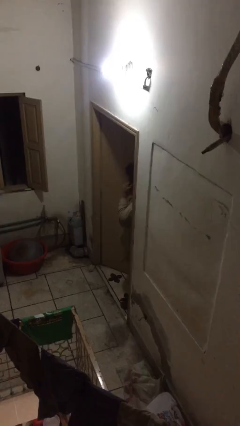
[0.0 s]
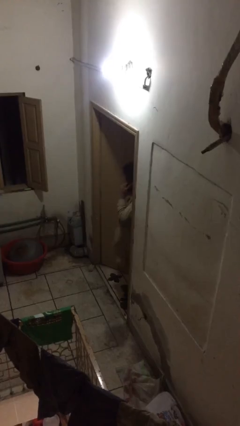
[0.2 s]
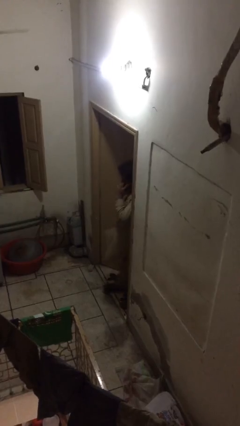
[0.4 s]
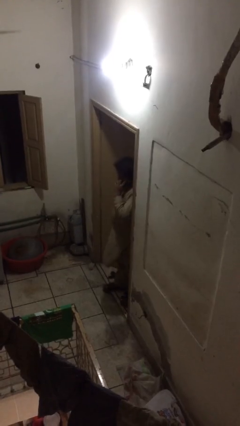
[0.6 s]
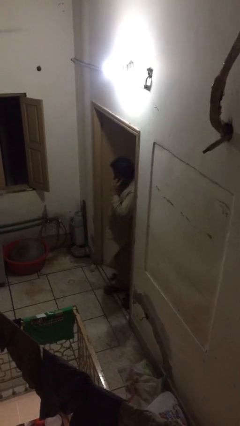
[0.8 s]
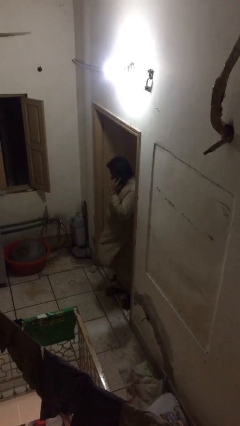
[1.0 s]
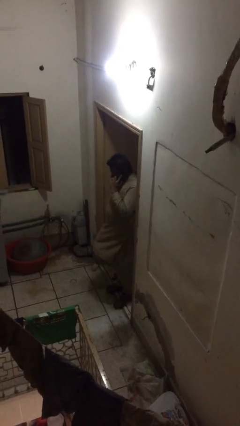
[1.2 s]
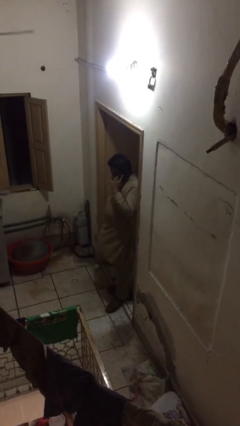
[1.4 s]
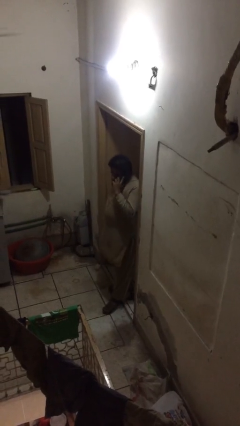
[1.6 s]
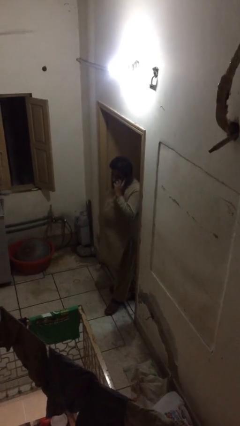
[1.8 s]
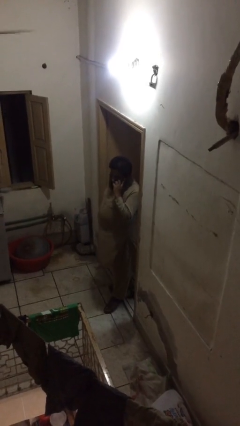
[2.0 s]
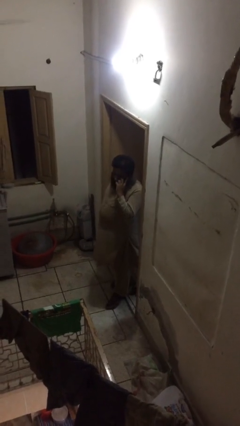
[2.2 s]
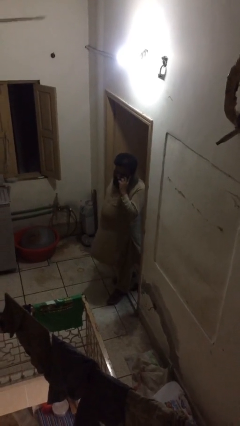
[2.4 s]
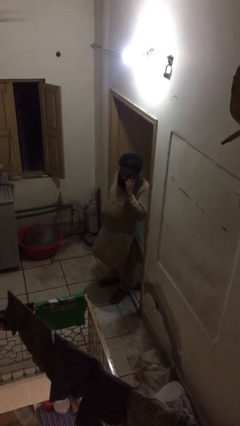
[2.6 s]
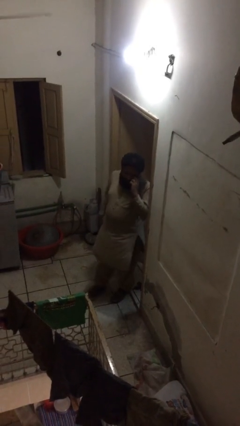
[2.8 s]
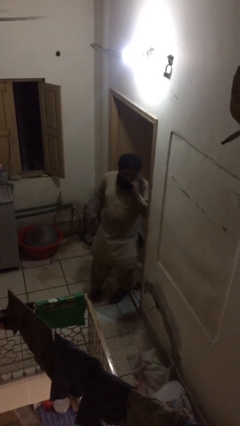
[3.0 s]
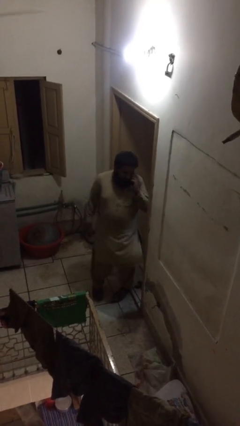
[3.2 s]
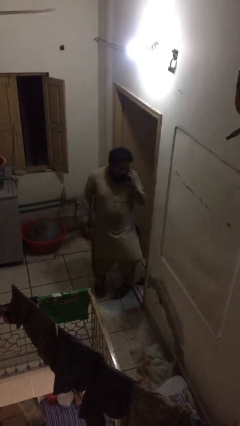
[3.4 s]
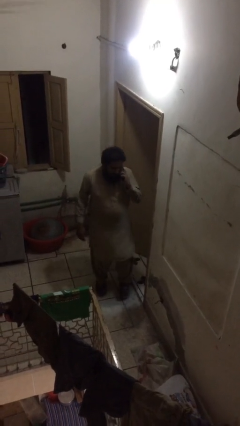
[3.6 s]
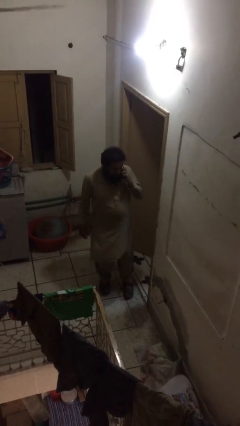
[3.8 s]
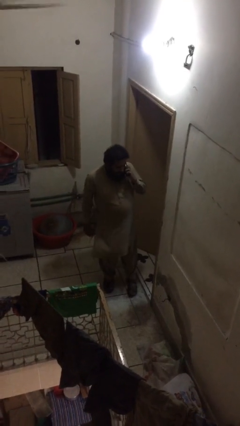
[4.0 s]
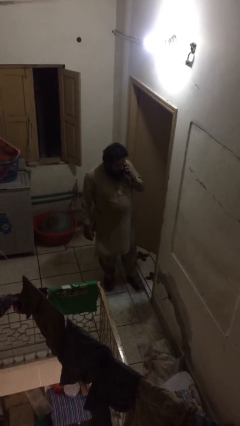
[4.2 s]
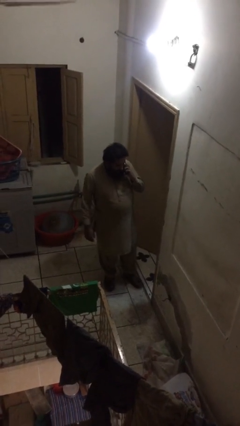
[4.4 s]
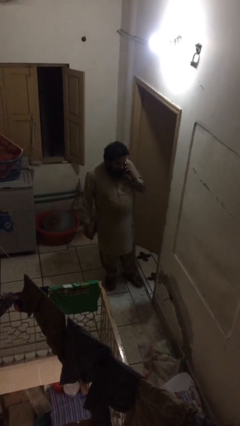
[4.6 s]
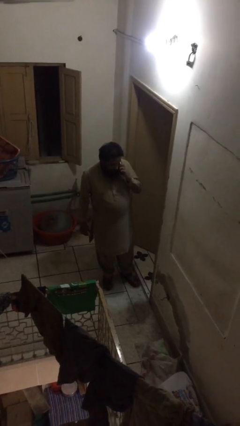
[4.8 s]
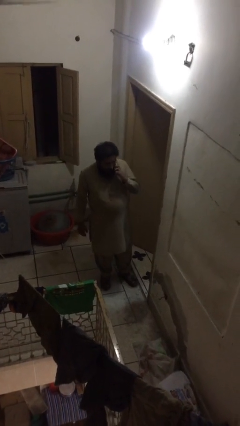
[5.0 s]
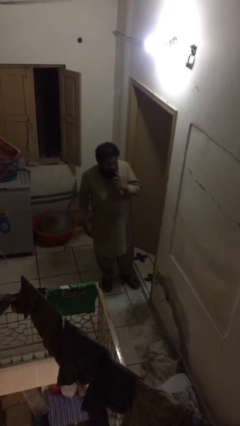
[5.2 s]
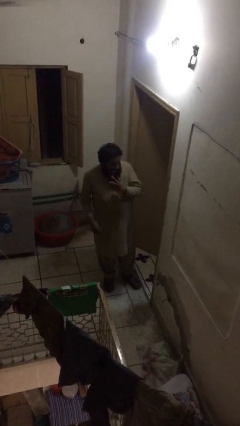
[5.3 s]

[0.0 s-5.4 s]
person enters scene through structure

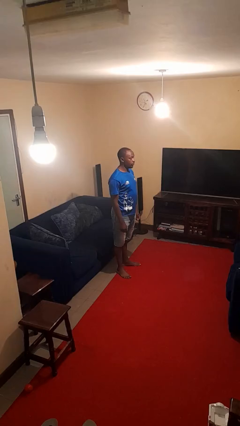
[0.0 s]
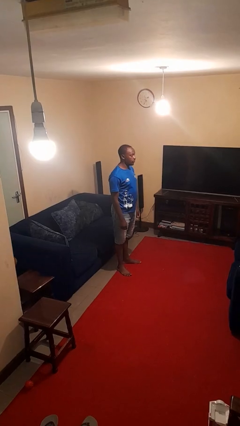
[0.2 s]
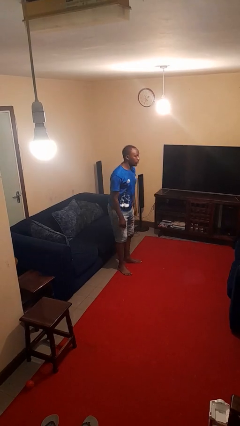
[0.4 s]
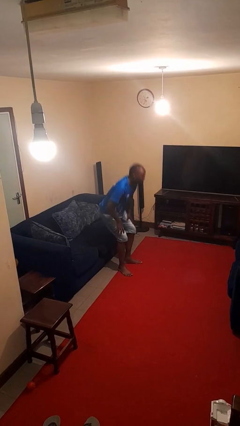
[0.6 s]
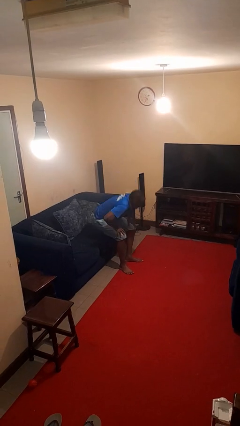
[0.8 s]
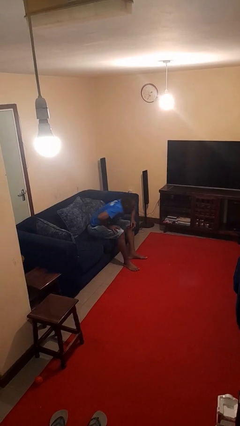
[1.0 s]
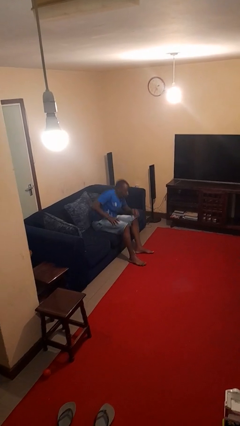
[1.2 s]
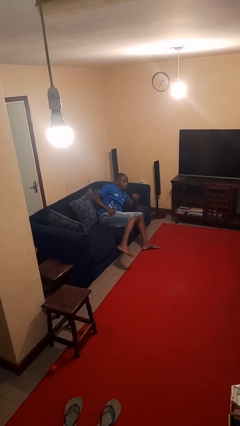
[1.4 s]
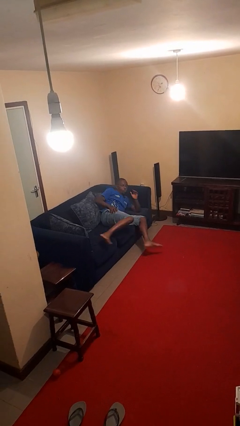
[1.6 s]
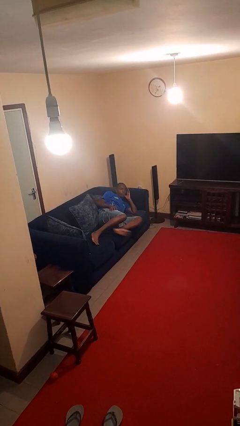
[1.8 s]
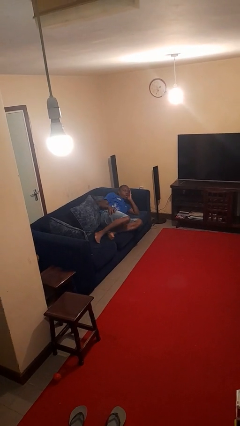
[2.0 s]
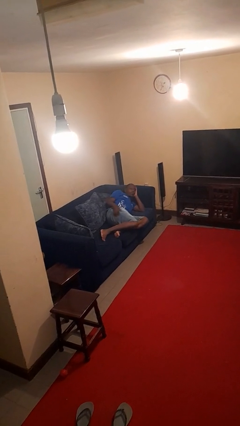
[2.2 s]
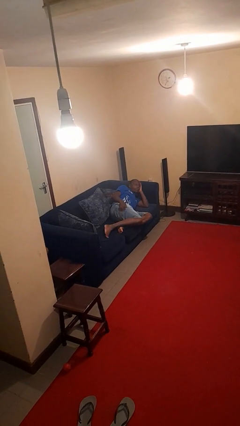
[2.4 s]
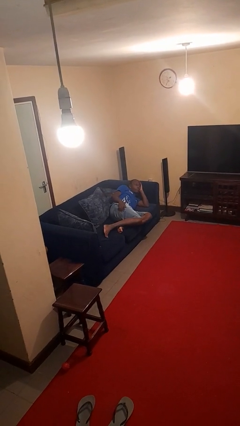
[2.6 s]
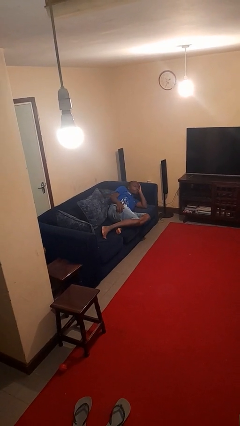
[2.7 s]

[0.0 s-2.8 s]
person lies down on couch

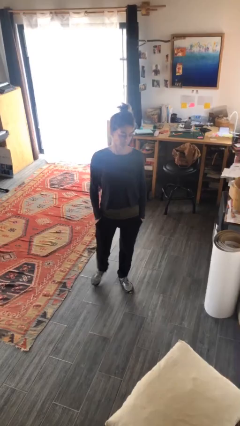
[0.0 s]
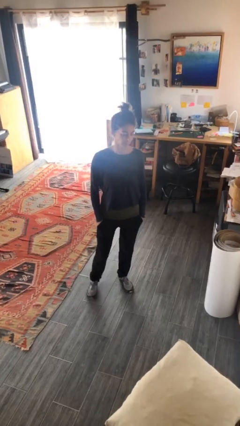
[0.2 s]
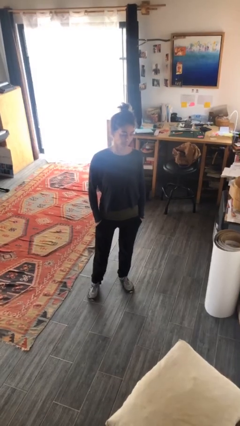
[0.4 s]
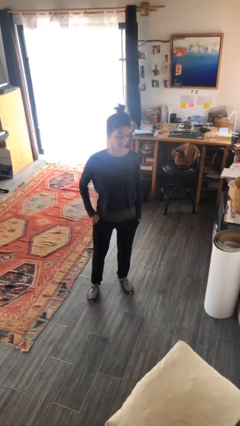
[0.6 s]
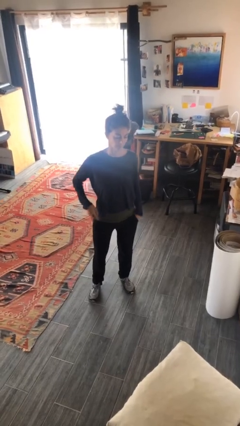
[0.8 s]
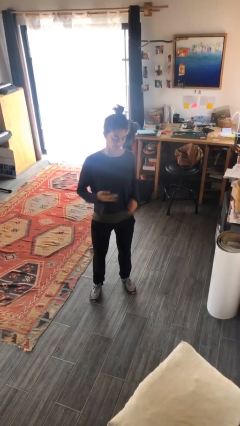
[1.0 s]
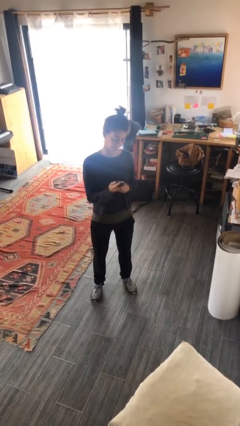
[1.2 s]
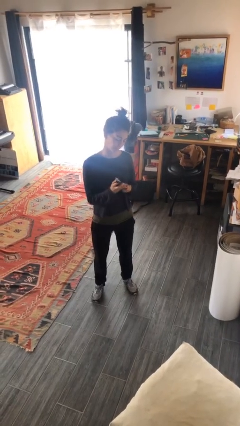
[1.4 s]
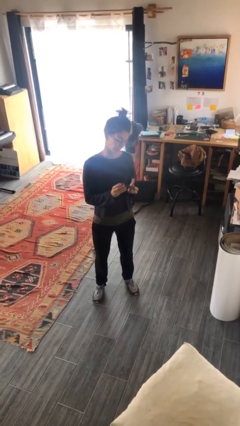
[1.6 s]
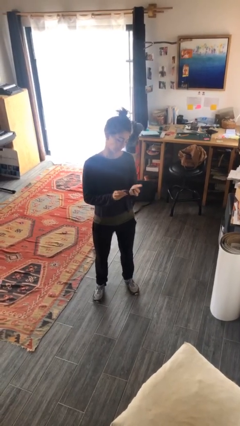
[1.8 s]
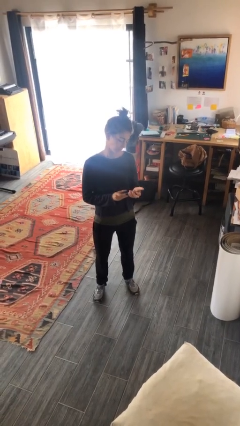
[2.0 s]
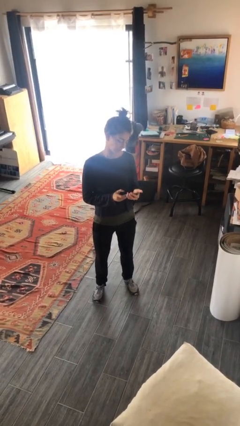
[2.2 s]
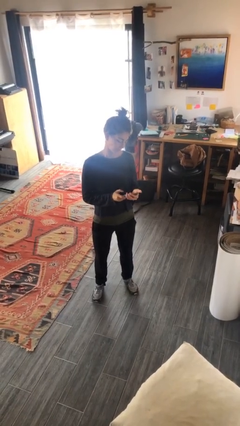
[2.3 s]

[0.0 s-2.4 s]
person takes phone from pocket

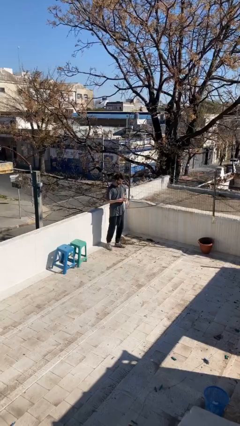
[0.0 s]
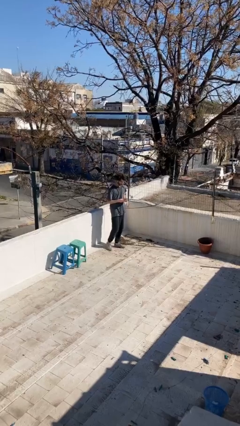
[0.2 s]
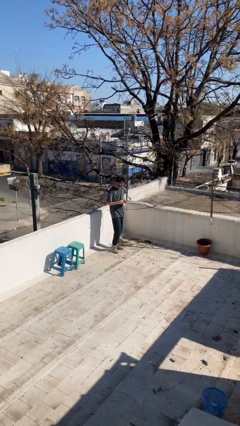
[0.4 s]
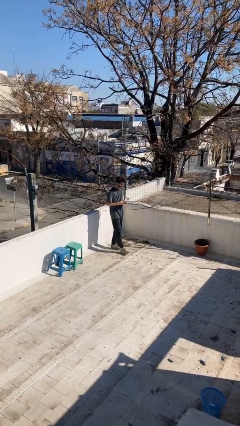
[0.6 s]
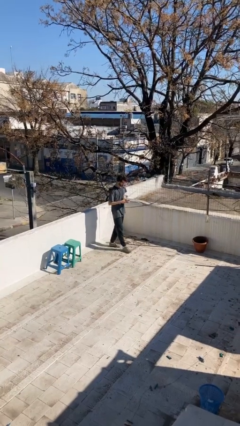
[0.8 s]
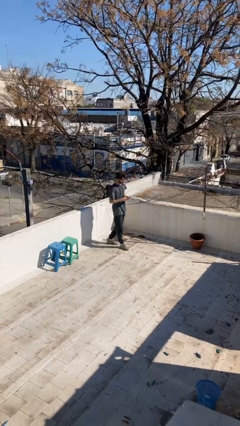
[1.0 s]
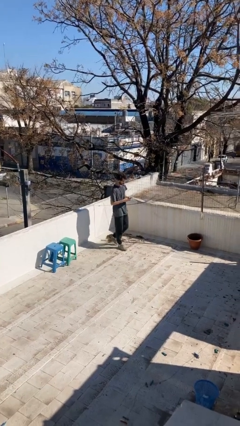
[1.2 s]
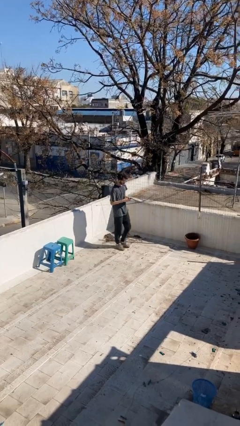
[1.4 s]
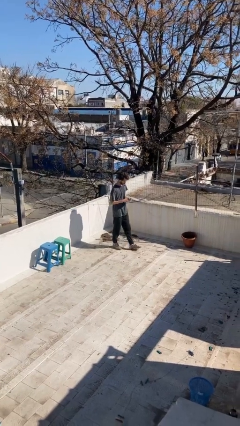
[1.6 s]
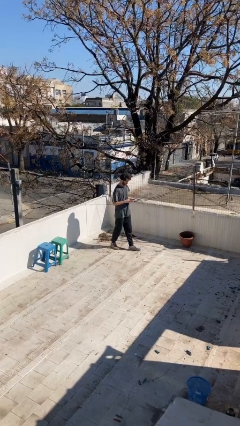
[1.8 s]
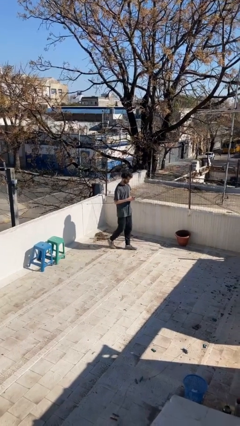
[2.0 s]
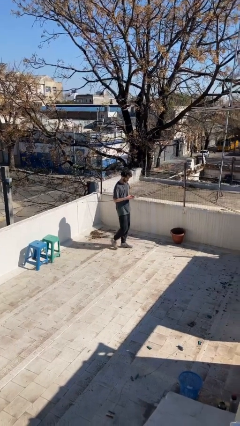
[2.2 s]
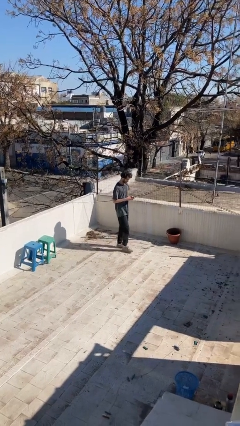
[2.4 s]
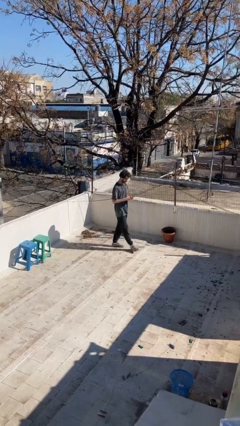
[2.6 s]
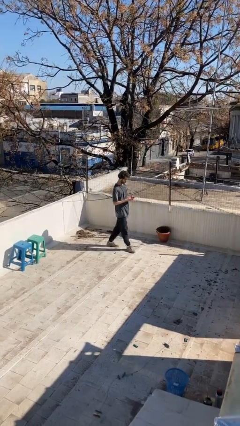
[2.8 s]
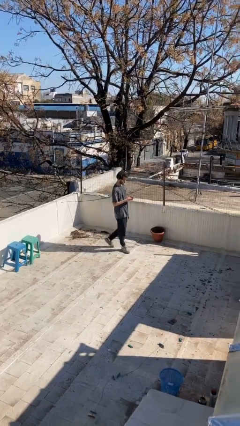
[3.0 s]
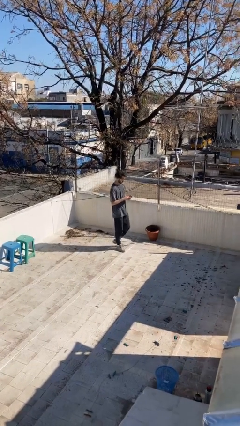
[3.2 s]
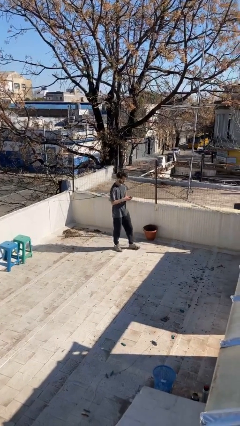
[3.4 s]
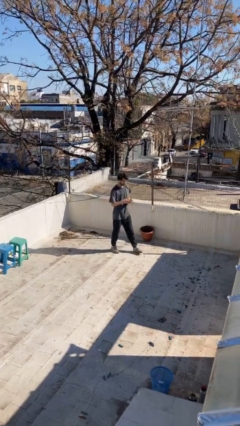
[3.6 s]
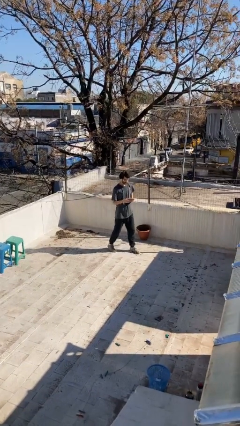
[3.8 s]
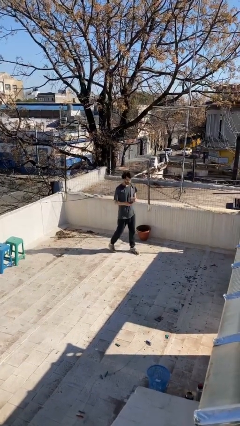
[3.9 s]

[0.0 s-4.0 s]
person texts on phone

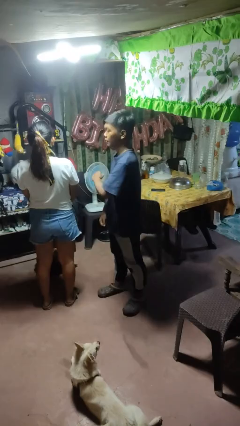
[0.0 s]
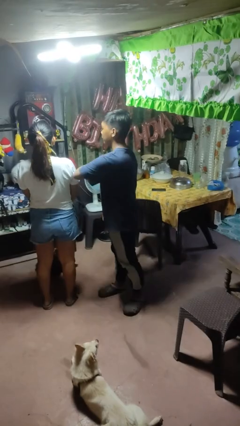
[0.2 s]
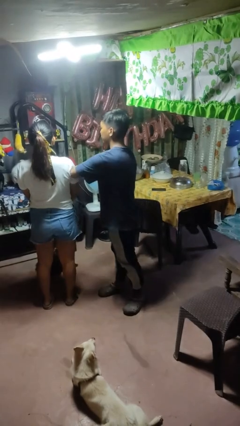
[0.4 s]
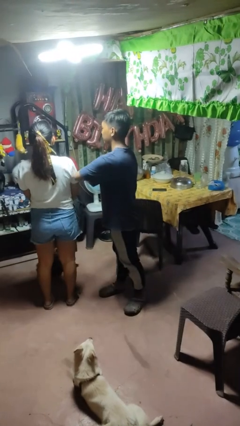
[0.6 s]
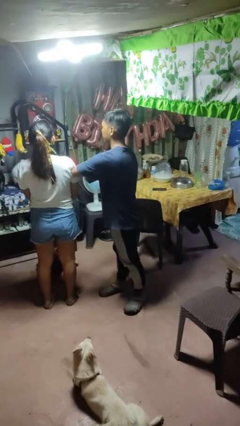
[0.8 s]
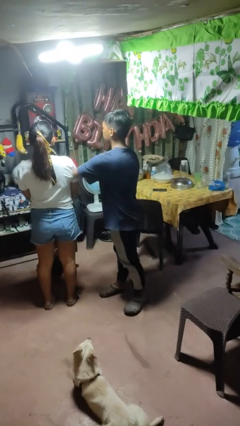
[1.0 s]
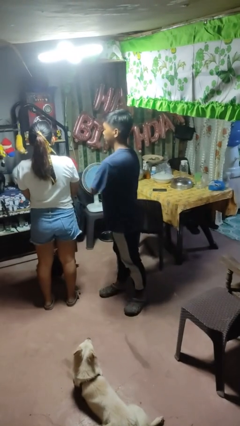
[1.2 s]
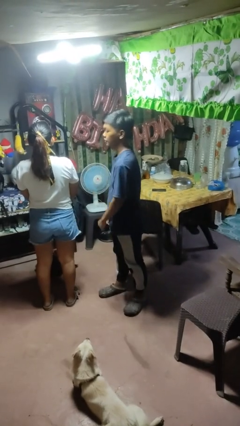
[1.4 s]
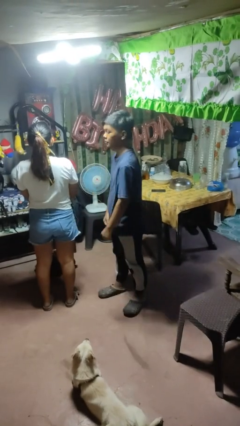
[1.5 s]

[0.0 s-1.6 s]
person nudges person with elbow

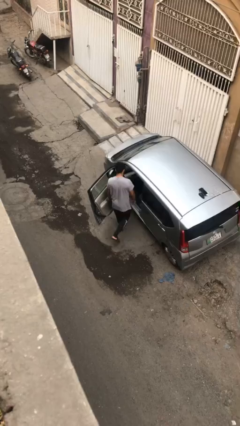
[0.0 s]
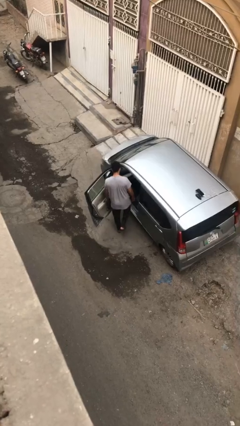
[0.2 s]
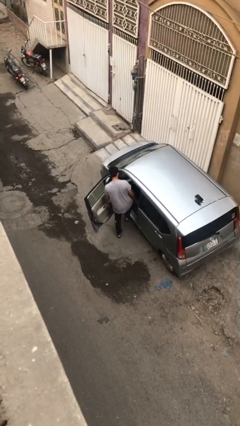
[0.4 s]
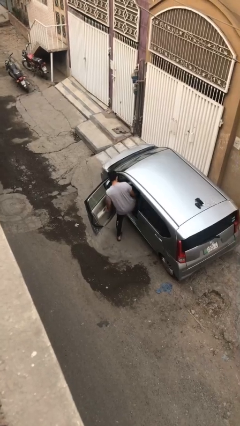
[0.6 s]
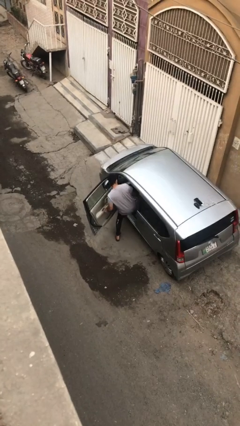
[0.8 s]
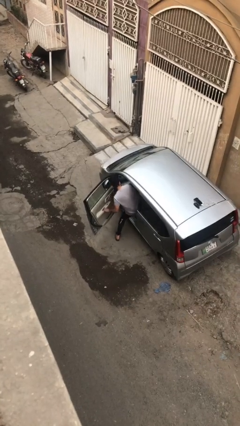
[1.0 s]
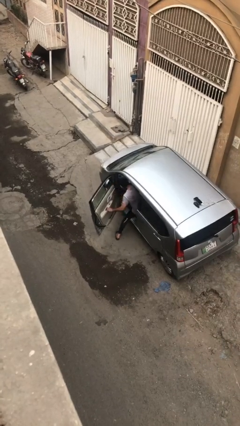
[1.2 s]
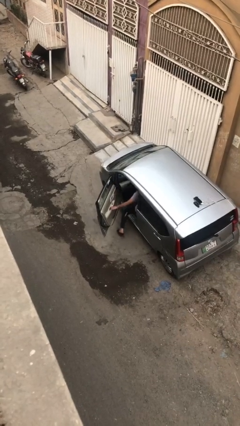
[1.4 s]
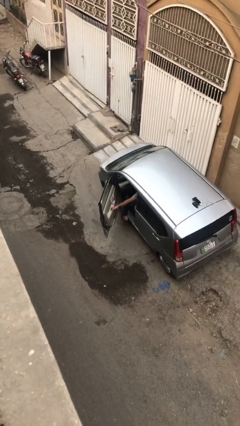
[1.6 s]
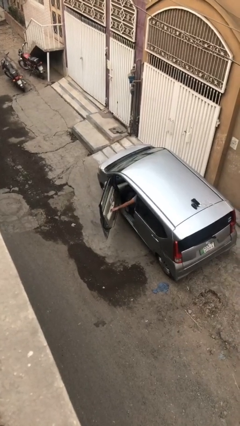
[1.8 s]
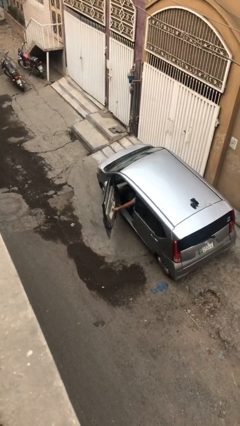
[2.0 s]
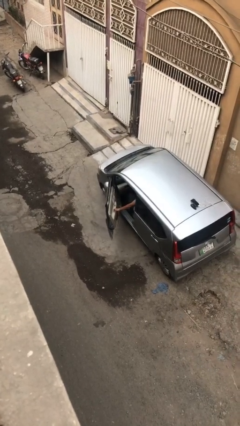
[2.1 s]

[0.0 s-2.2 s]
person enters car
